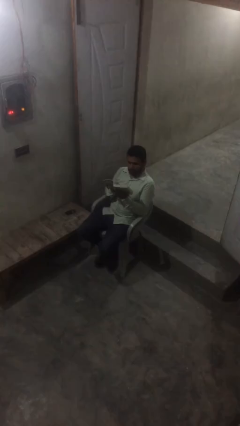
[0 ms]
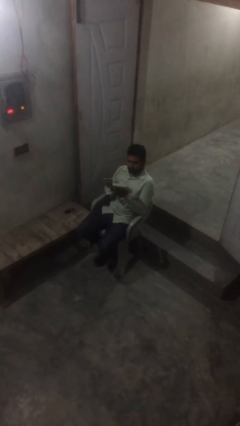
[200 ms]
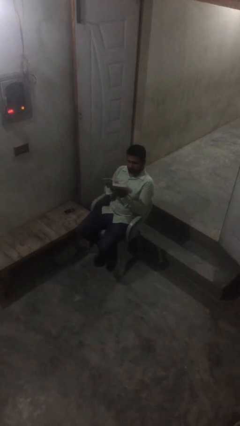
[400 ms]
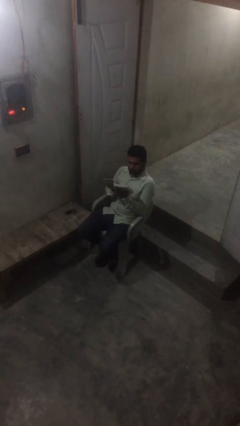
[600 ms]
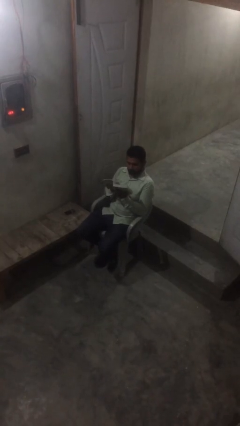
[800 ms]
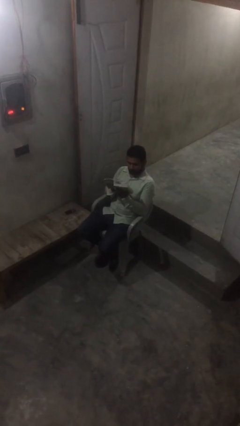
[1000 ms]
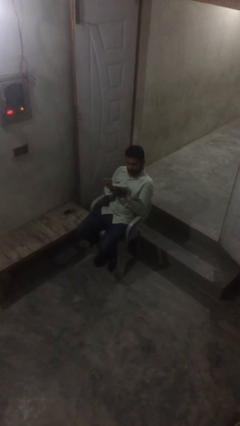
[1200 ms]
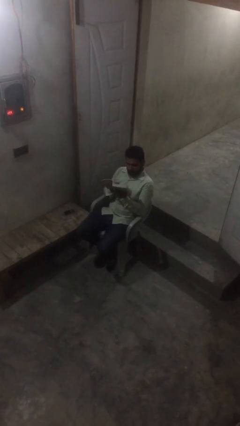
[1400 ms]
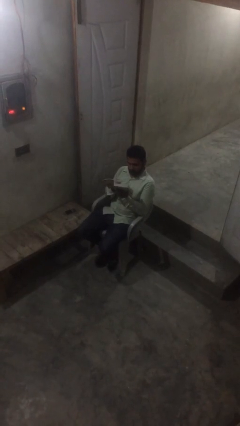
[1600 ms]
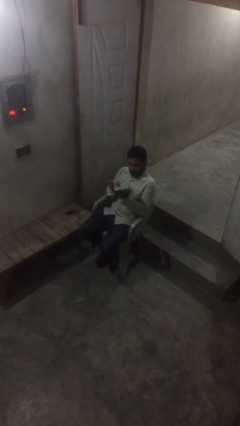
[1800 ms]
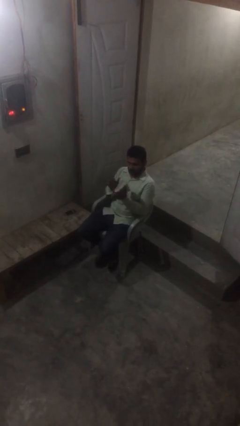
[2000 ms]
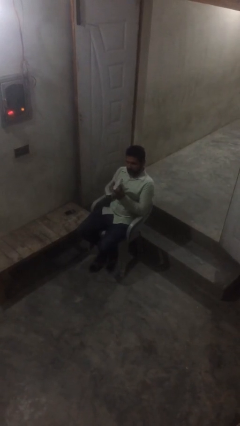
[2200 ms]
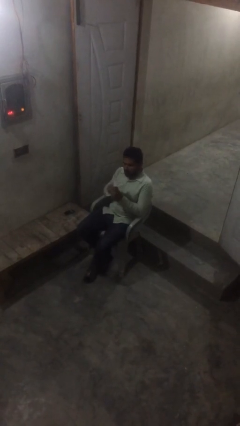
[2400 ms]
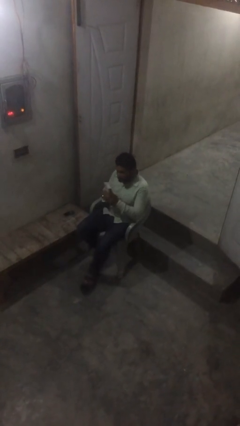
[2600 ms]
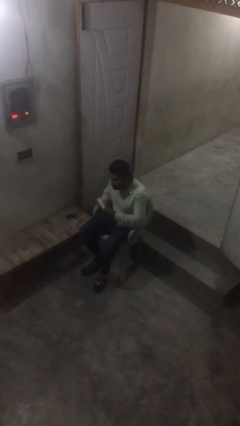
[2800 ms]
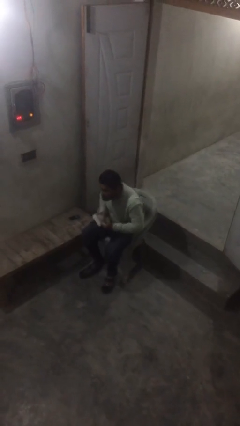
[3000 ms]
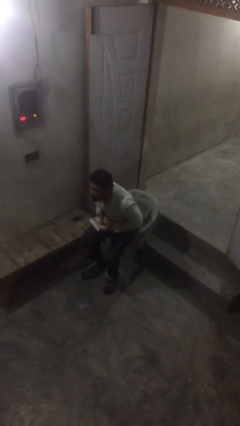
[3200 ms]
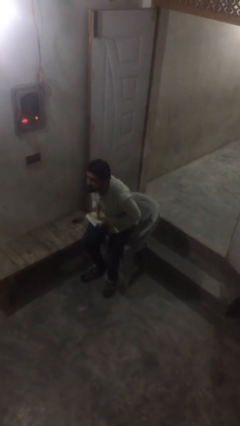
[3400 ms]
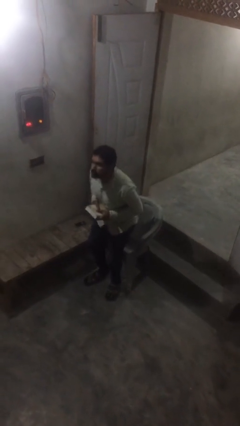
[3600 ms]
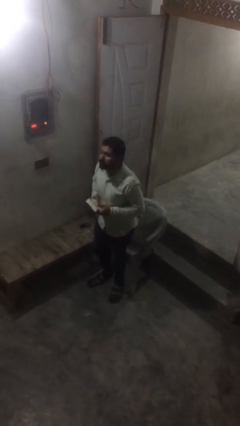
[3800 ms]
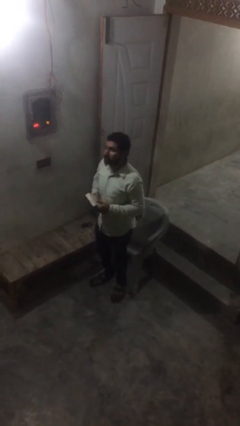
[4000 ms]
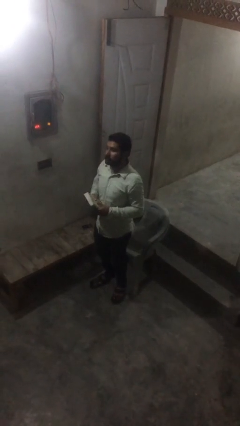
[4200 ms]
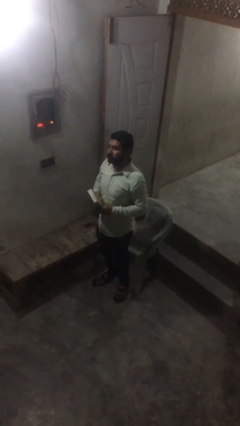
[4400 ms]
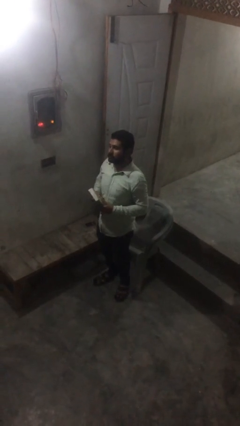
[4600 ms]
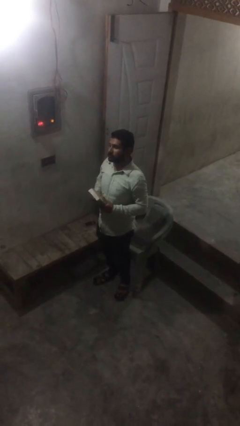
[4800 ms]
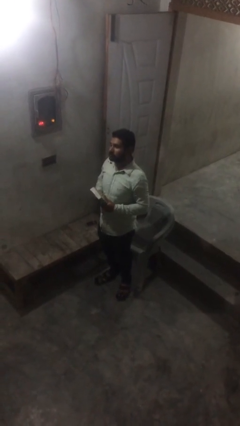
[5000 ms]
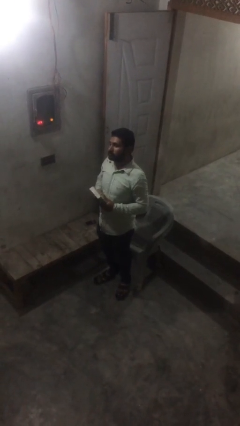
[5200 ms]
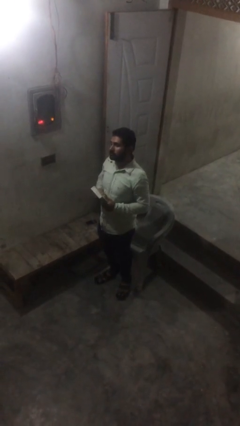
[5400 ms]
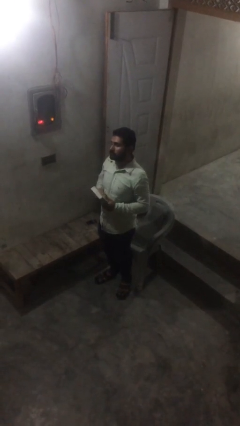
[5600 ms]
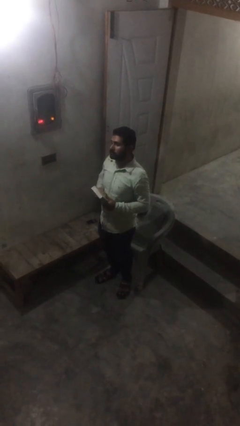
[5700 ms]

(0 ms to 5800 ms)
person stands up

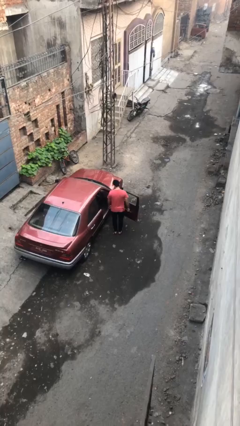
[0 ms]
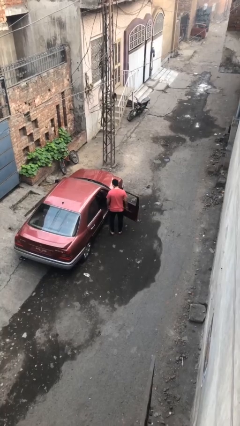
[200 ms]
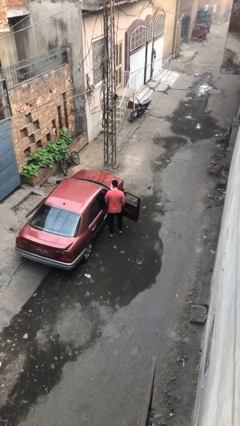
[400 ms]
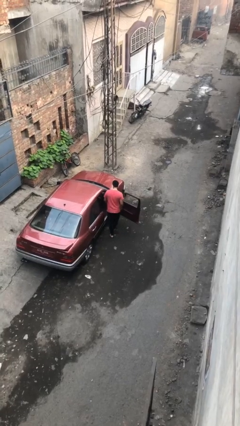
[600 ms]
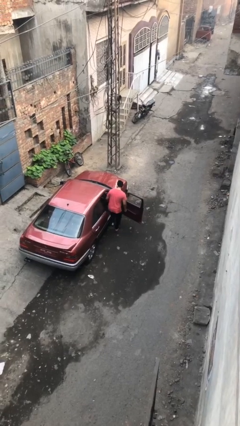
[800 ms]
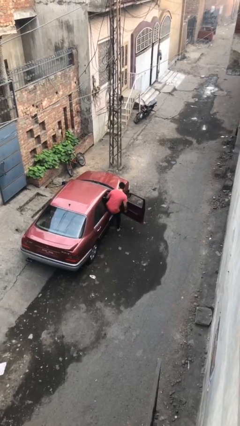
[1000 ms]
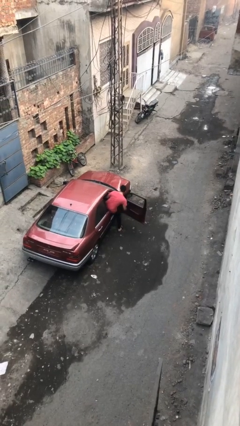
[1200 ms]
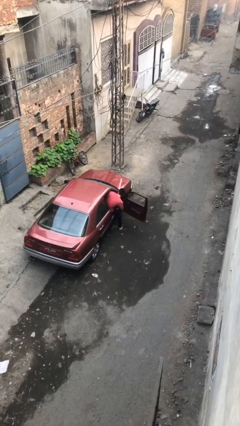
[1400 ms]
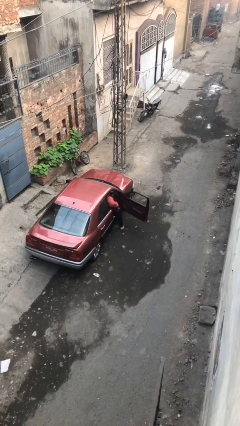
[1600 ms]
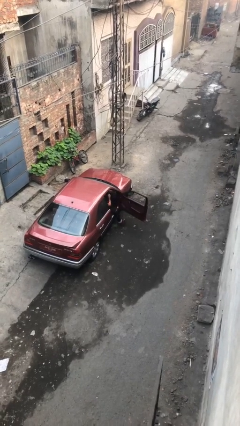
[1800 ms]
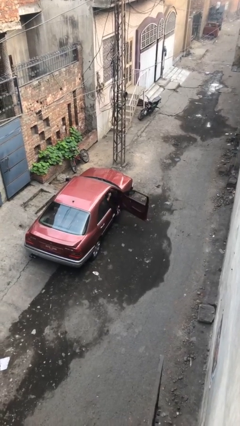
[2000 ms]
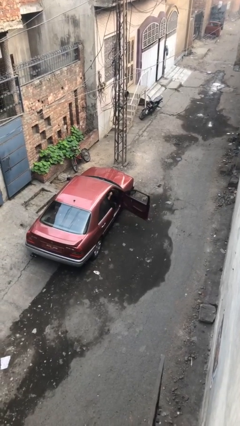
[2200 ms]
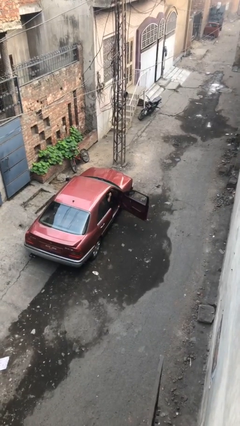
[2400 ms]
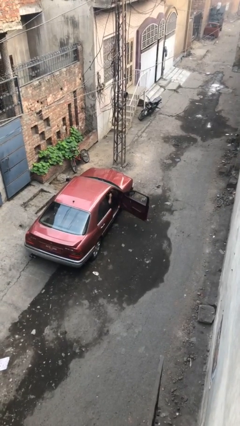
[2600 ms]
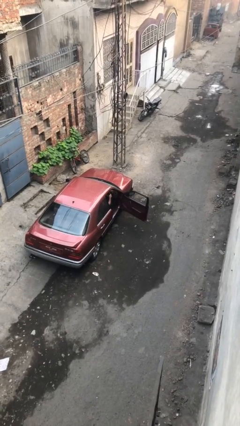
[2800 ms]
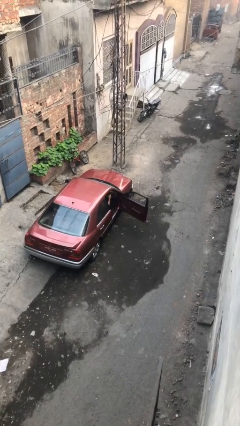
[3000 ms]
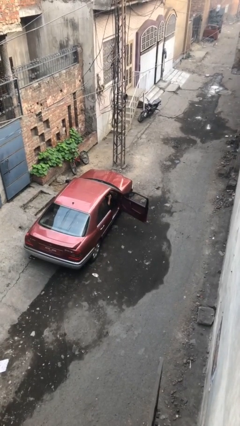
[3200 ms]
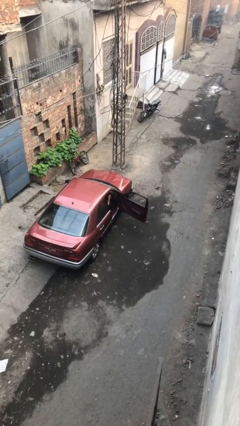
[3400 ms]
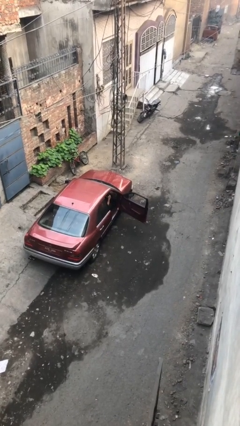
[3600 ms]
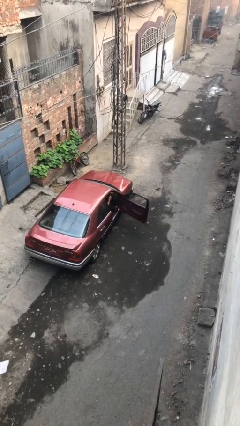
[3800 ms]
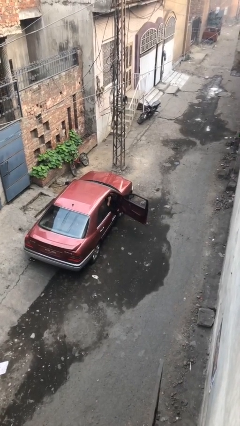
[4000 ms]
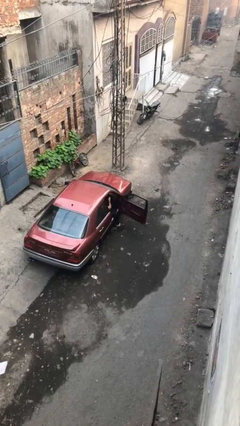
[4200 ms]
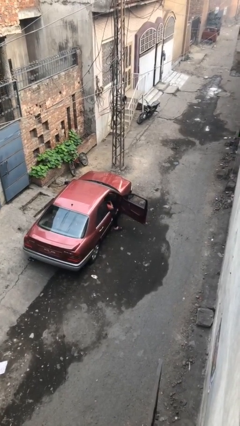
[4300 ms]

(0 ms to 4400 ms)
person enters car

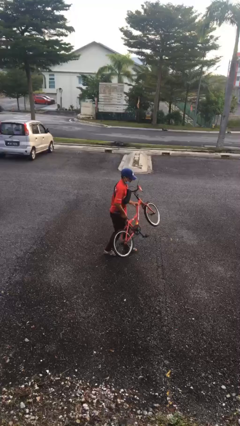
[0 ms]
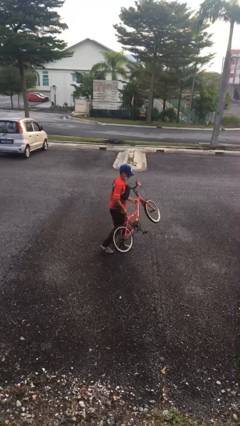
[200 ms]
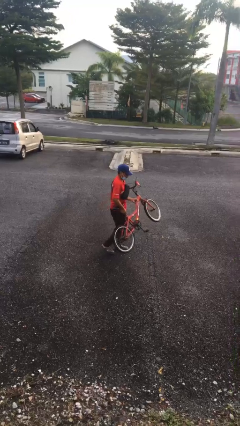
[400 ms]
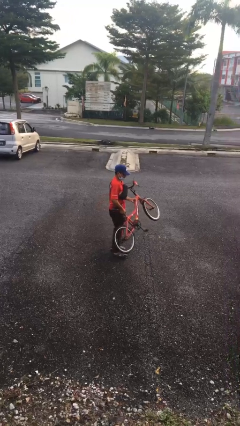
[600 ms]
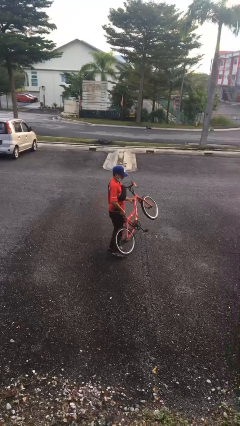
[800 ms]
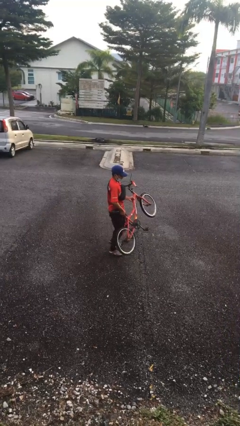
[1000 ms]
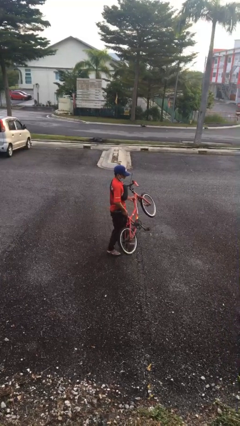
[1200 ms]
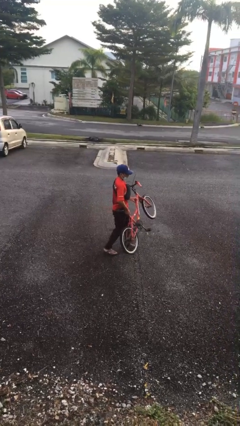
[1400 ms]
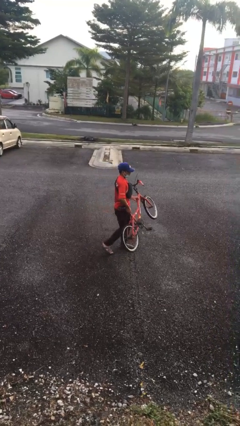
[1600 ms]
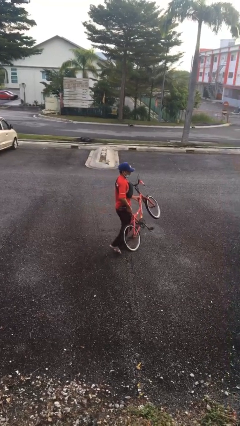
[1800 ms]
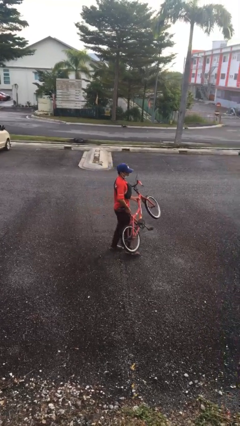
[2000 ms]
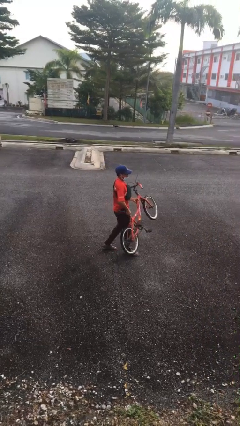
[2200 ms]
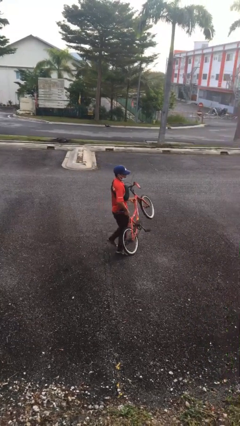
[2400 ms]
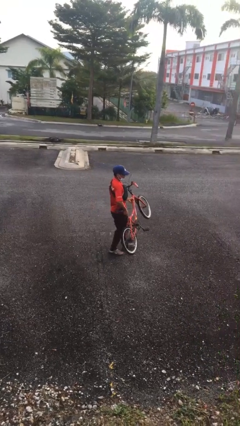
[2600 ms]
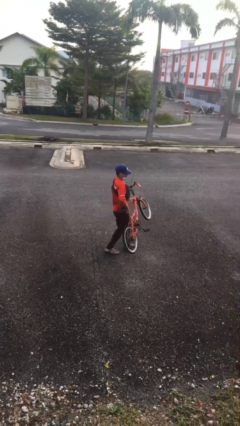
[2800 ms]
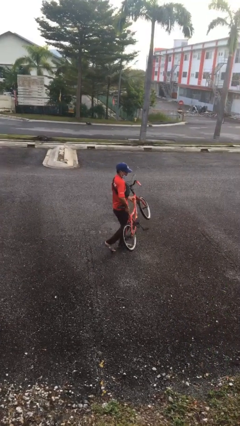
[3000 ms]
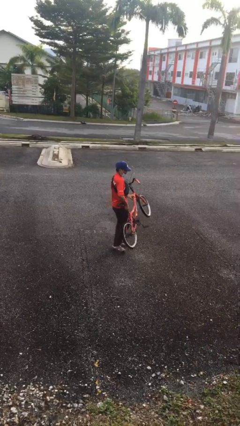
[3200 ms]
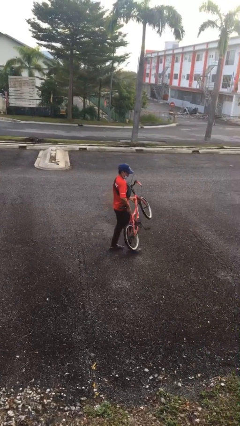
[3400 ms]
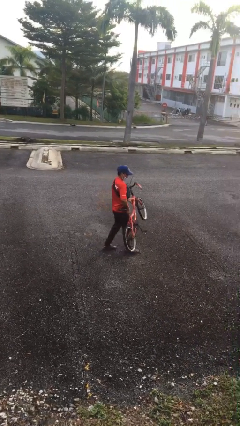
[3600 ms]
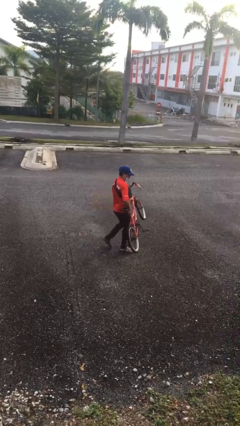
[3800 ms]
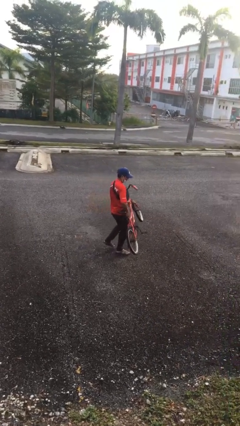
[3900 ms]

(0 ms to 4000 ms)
person carries heavy object

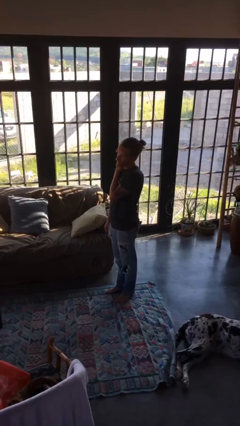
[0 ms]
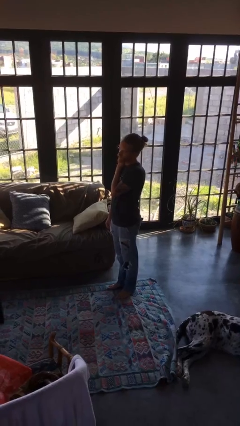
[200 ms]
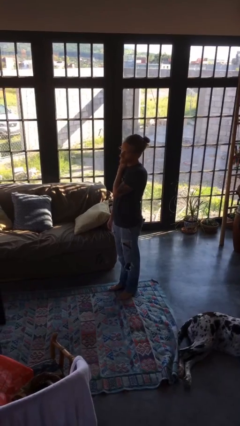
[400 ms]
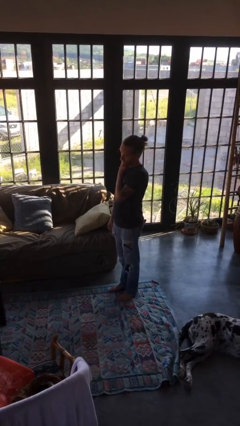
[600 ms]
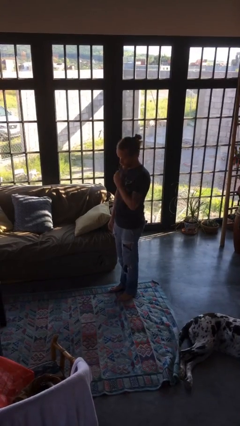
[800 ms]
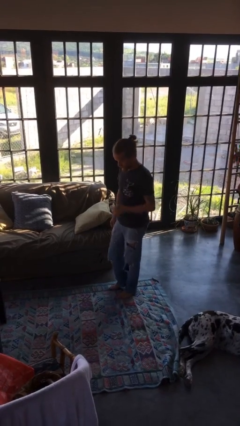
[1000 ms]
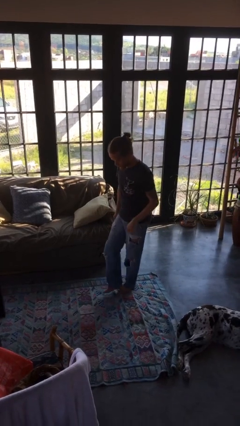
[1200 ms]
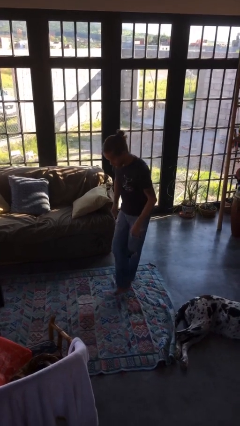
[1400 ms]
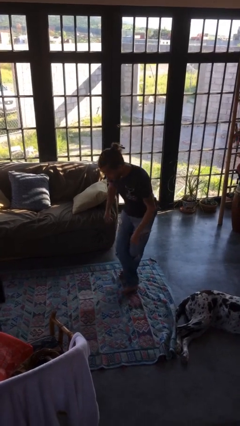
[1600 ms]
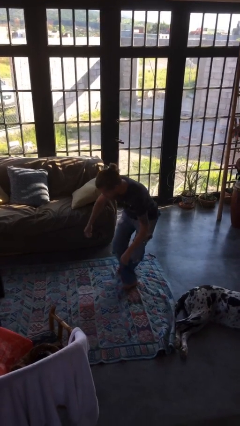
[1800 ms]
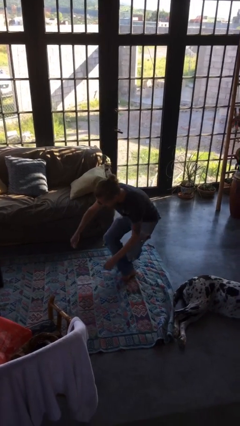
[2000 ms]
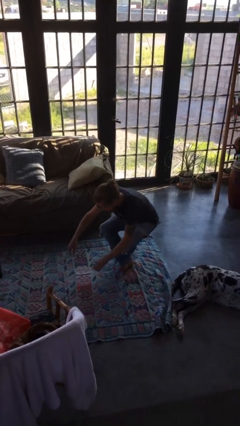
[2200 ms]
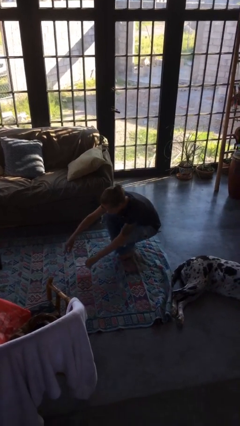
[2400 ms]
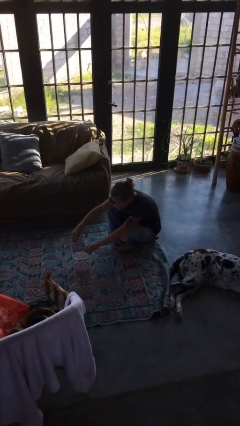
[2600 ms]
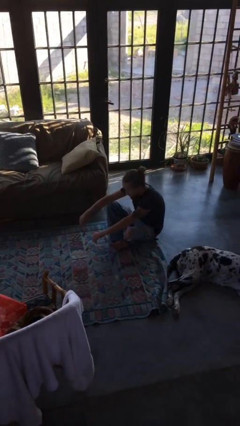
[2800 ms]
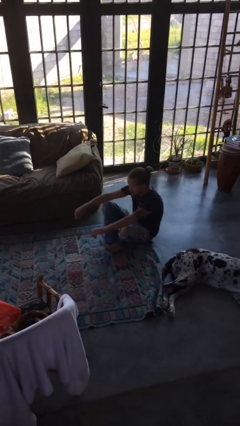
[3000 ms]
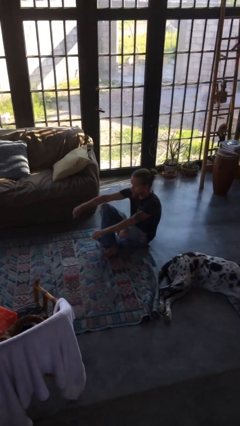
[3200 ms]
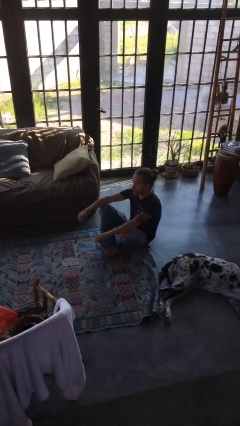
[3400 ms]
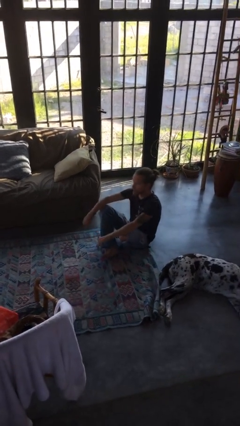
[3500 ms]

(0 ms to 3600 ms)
person sits crisscross
